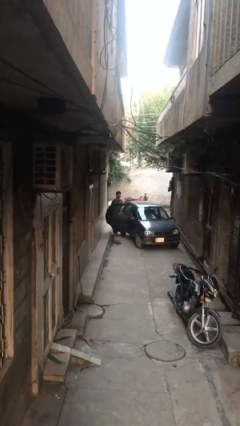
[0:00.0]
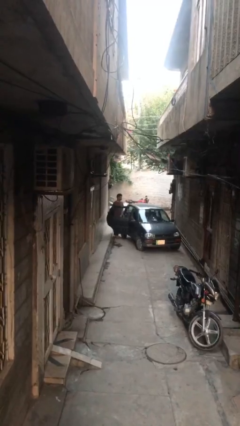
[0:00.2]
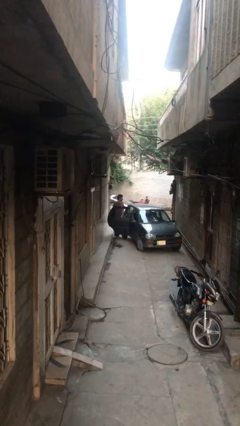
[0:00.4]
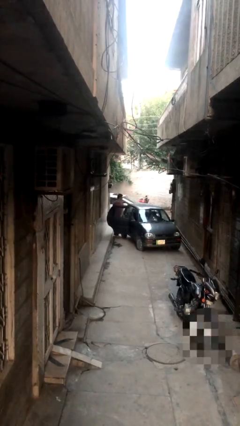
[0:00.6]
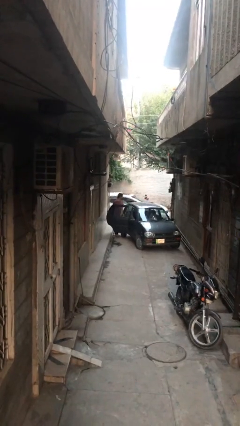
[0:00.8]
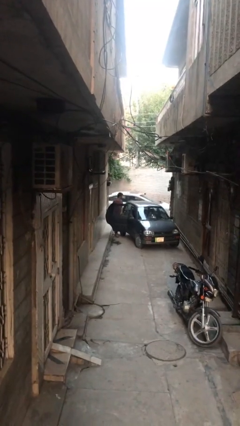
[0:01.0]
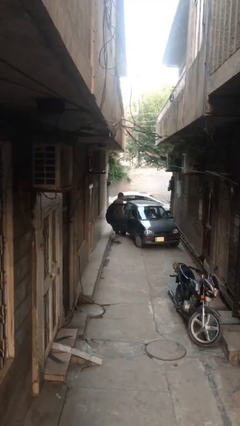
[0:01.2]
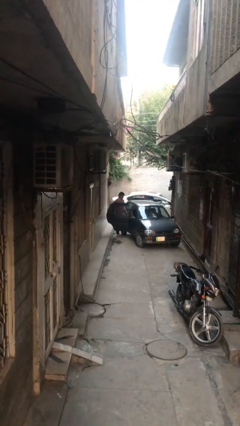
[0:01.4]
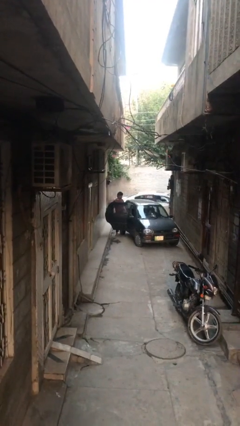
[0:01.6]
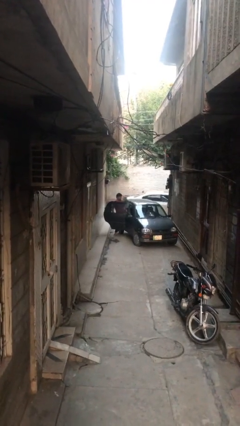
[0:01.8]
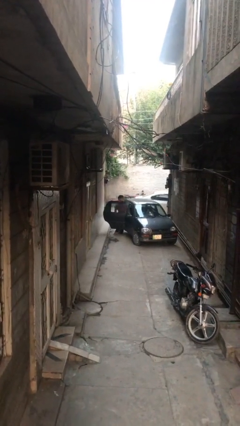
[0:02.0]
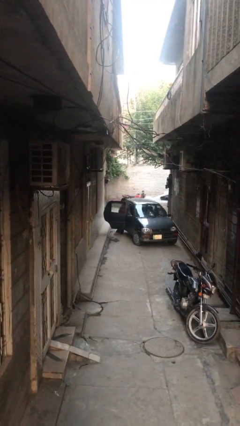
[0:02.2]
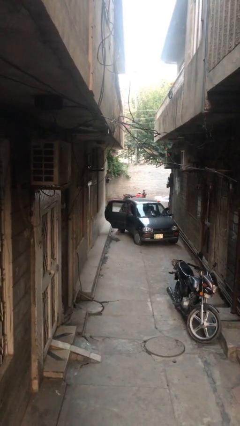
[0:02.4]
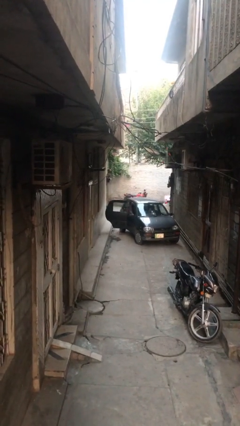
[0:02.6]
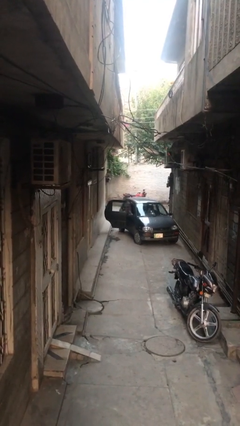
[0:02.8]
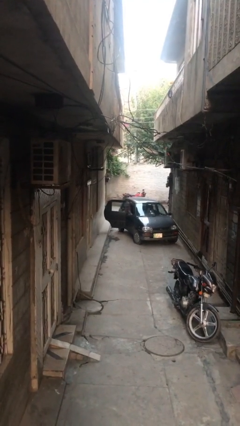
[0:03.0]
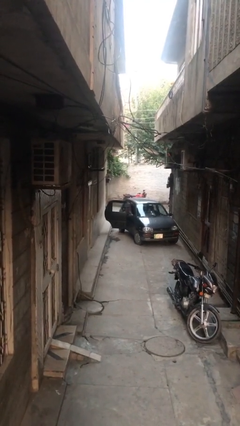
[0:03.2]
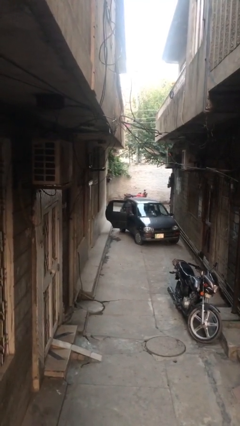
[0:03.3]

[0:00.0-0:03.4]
person enters car

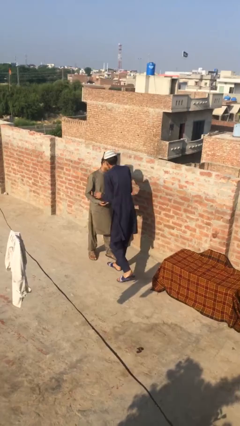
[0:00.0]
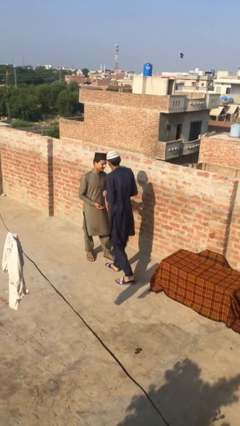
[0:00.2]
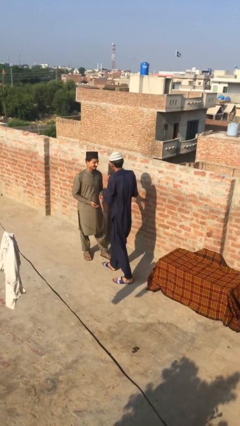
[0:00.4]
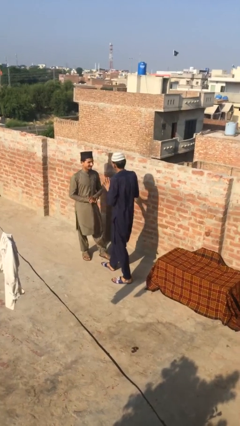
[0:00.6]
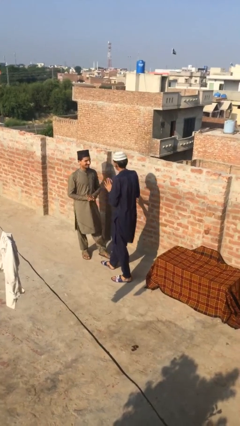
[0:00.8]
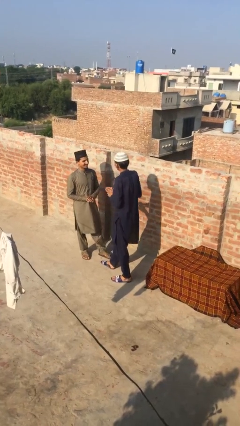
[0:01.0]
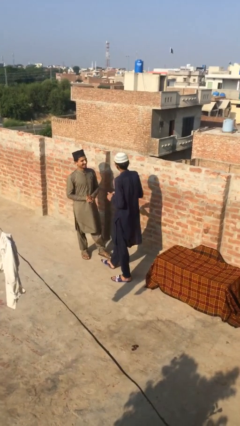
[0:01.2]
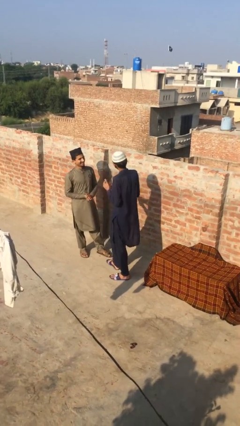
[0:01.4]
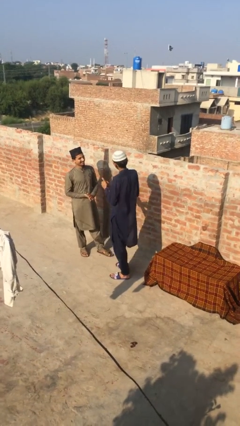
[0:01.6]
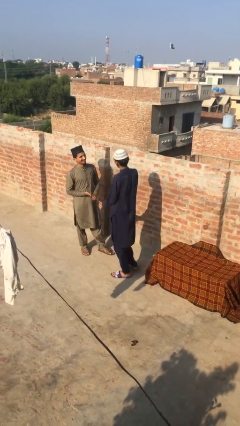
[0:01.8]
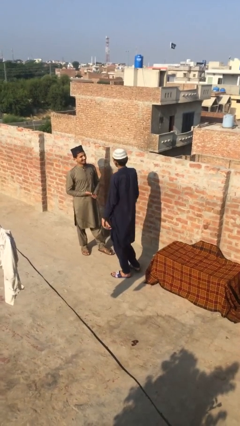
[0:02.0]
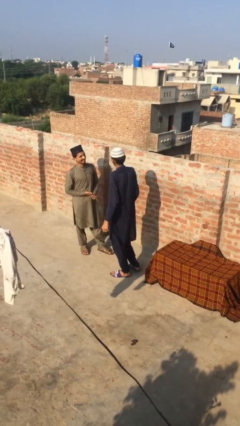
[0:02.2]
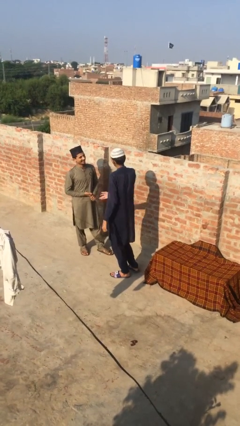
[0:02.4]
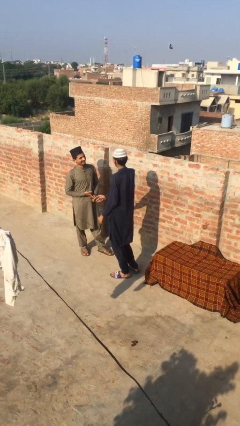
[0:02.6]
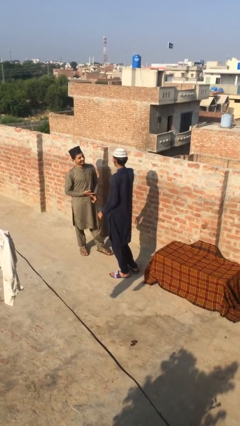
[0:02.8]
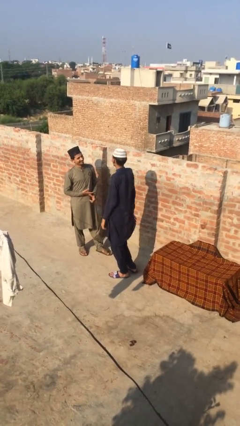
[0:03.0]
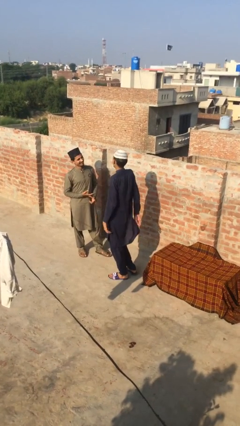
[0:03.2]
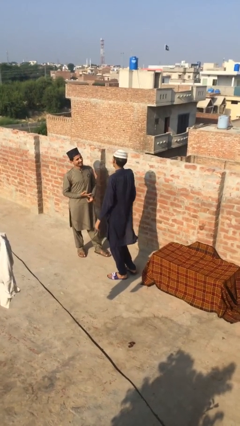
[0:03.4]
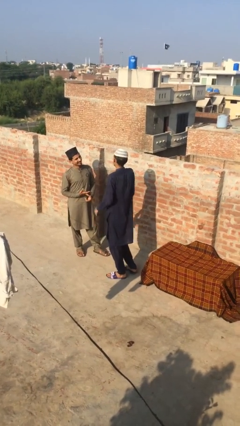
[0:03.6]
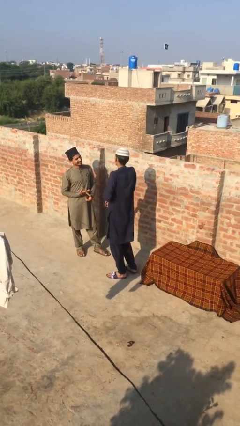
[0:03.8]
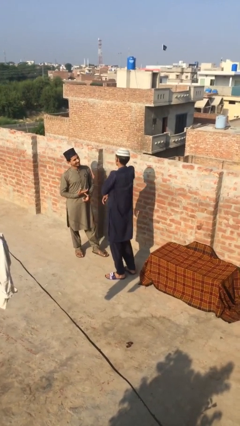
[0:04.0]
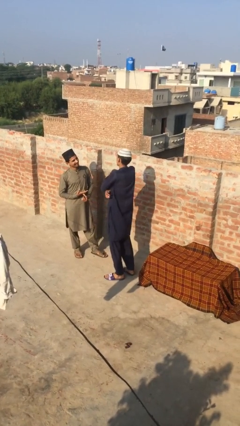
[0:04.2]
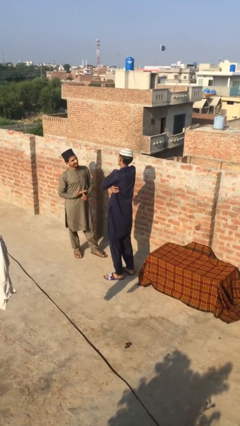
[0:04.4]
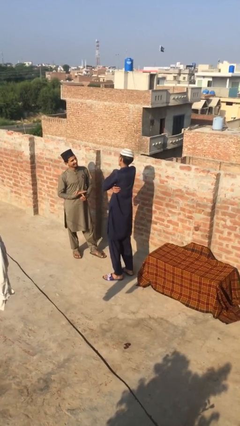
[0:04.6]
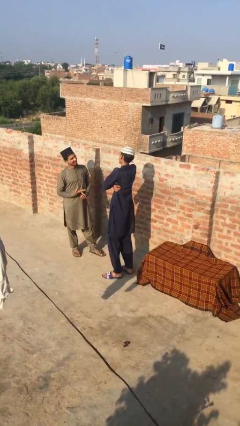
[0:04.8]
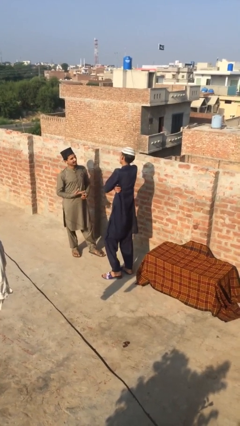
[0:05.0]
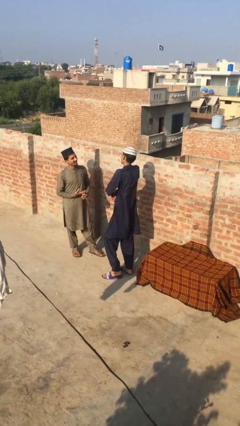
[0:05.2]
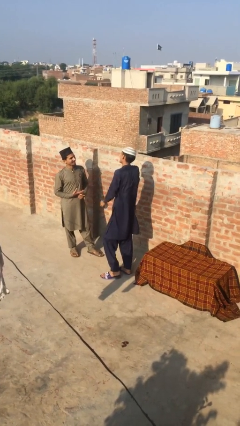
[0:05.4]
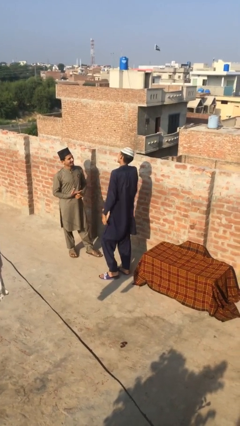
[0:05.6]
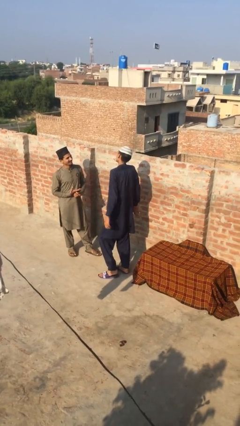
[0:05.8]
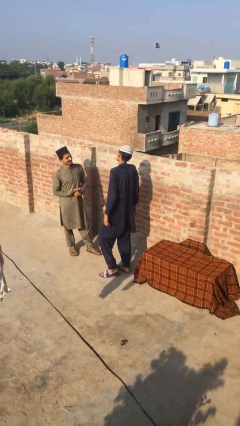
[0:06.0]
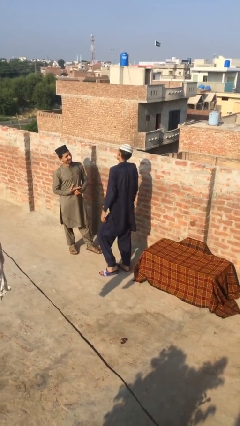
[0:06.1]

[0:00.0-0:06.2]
person talks to person

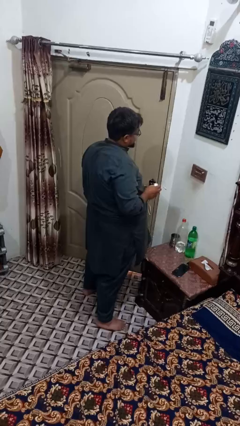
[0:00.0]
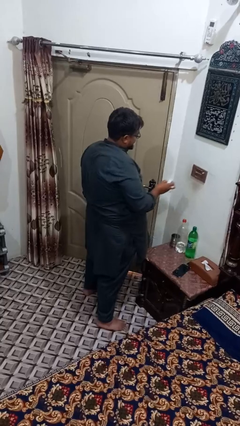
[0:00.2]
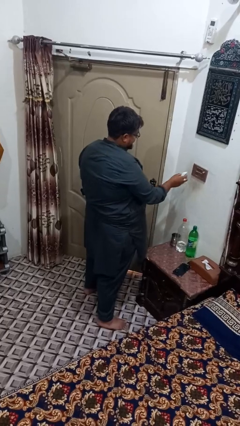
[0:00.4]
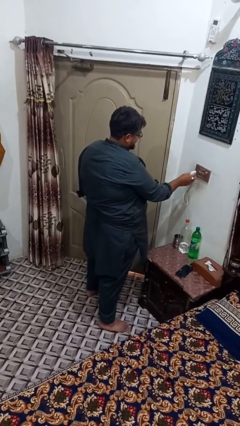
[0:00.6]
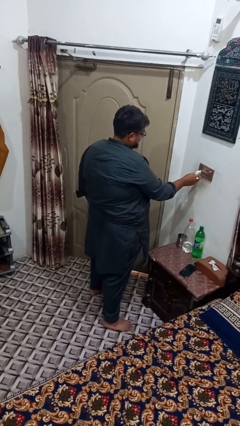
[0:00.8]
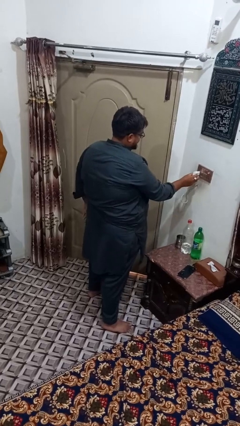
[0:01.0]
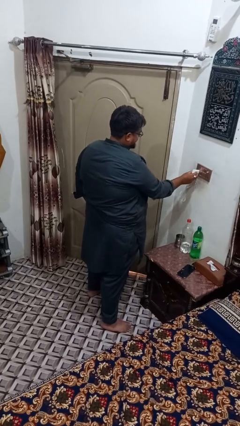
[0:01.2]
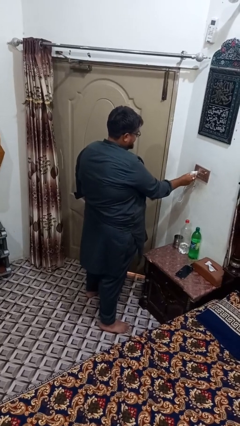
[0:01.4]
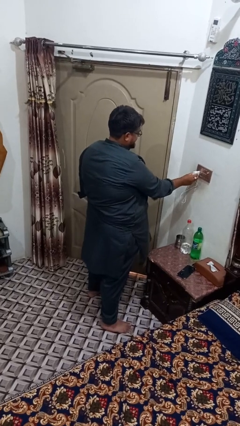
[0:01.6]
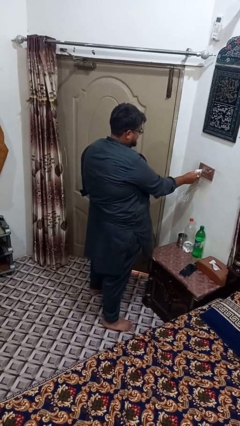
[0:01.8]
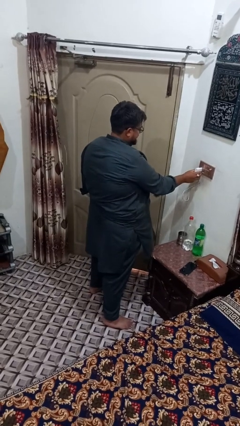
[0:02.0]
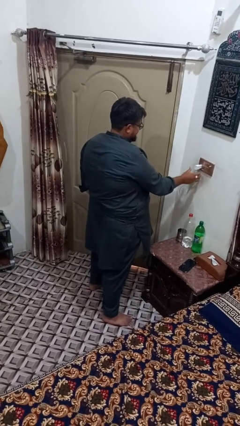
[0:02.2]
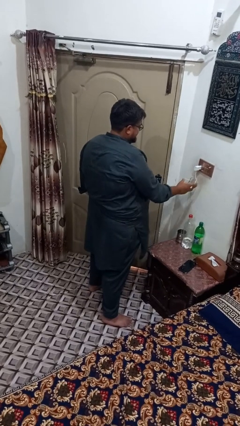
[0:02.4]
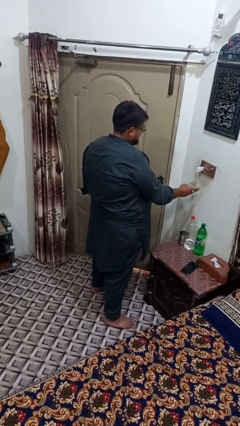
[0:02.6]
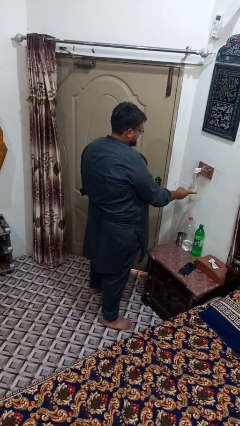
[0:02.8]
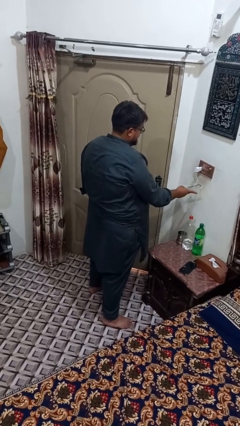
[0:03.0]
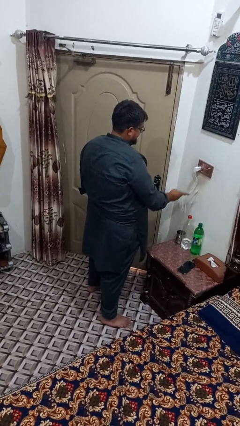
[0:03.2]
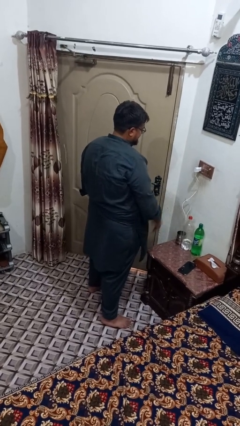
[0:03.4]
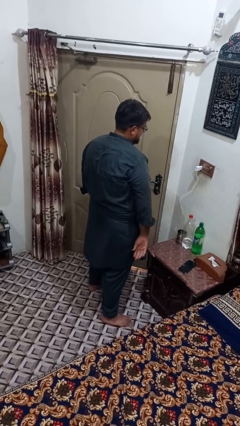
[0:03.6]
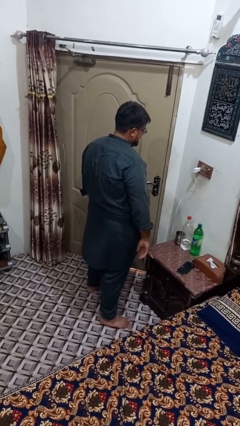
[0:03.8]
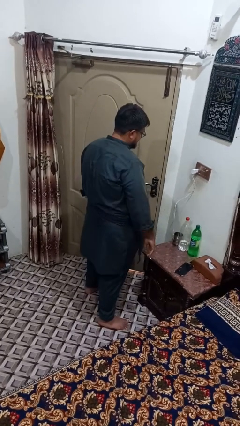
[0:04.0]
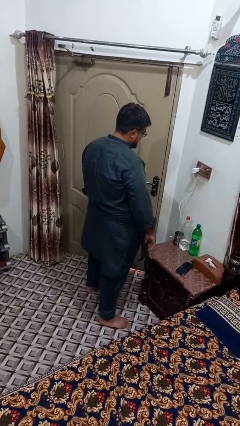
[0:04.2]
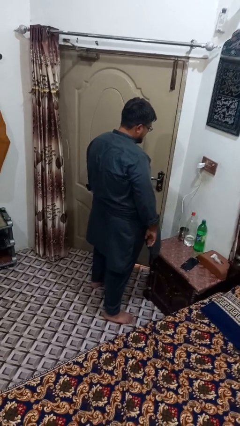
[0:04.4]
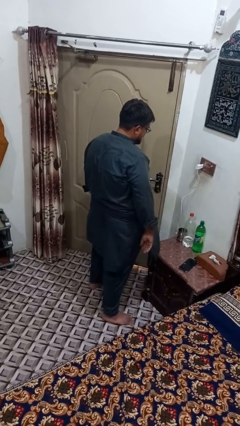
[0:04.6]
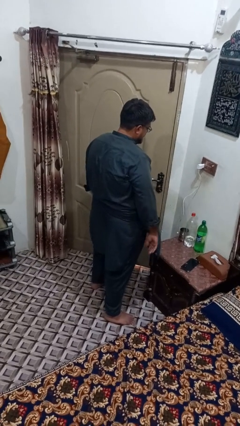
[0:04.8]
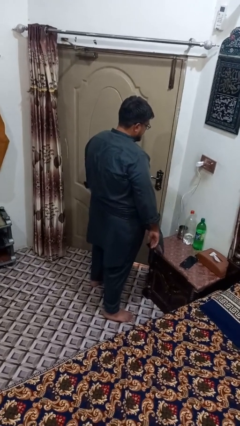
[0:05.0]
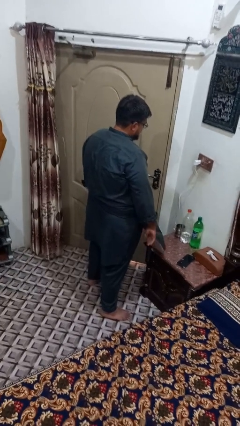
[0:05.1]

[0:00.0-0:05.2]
person plugs into electrical socket

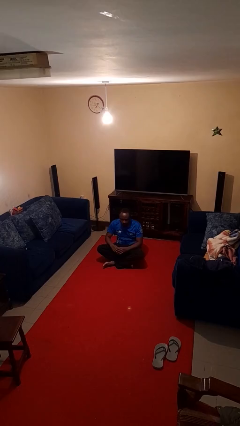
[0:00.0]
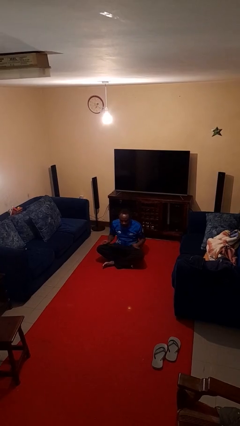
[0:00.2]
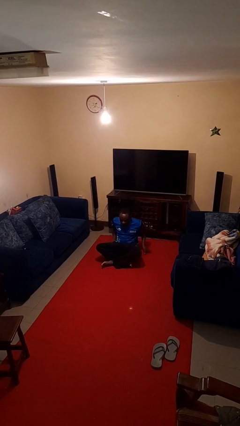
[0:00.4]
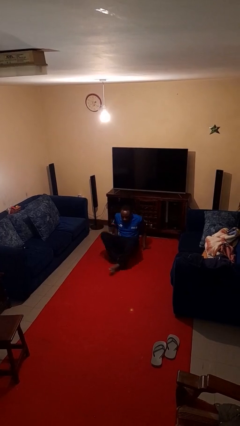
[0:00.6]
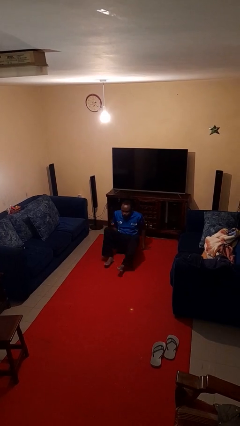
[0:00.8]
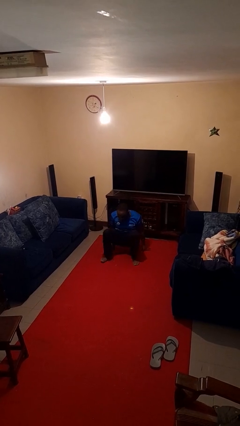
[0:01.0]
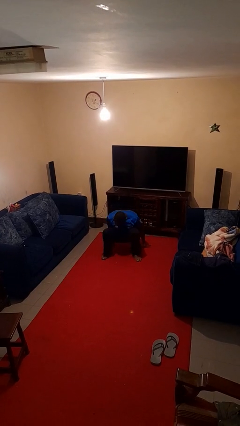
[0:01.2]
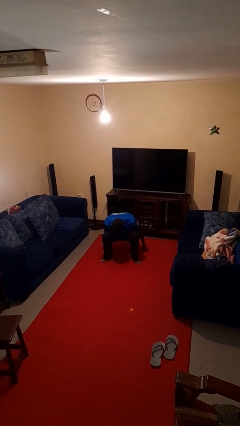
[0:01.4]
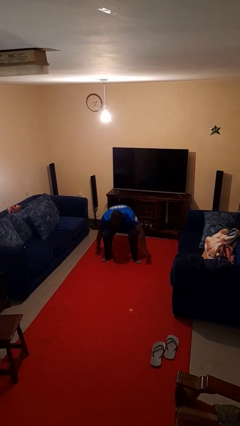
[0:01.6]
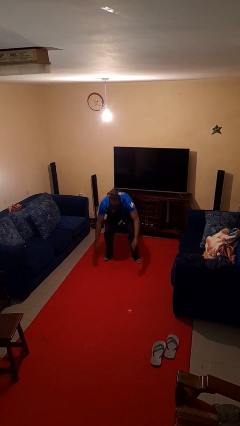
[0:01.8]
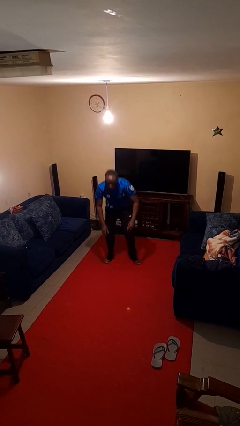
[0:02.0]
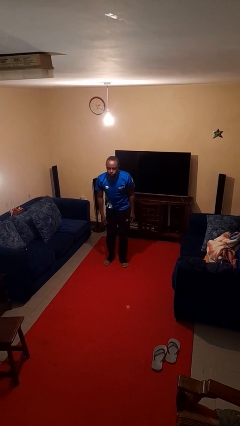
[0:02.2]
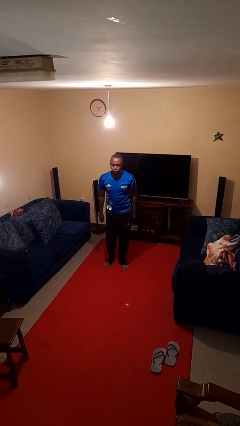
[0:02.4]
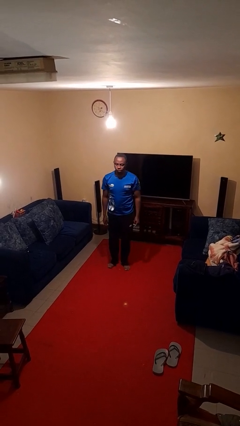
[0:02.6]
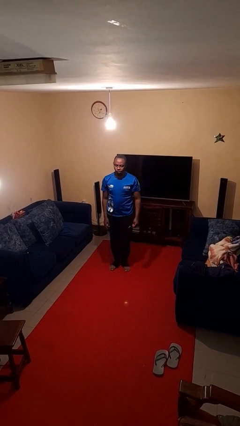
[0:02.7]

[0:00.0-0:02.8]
person stands up from floor

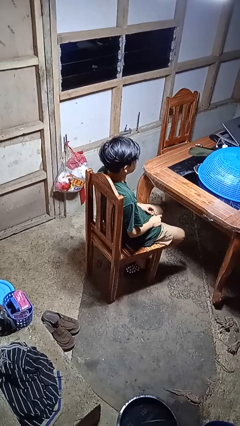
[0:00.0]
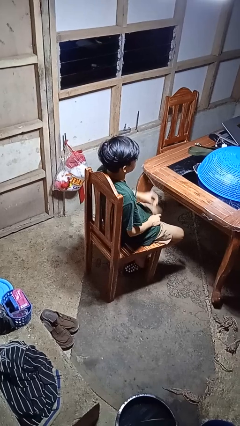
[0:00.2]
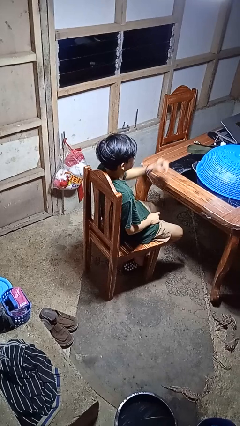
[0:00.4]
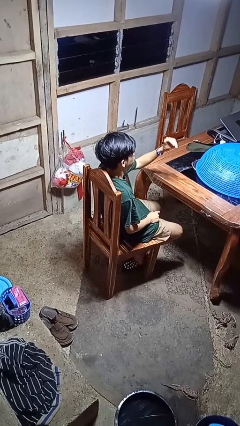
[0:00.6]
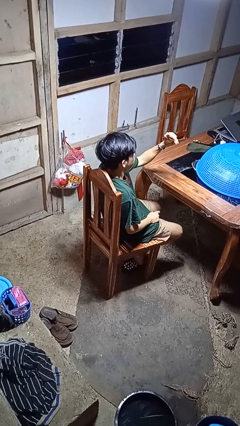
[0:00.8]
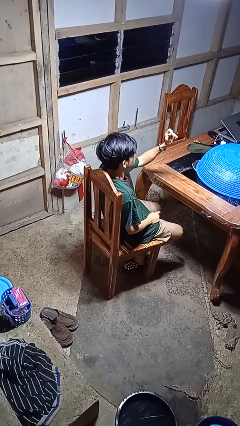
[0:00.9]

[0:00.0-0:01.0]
person snaps fingers
